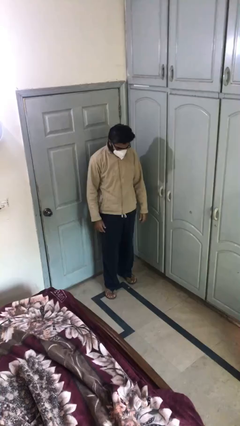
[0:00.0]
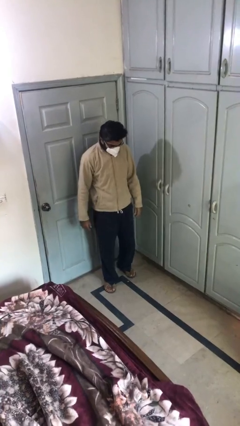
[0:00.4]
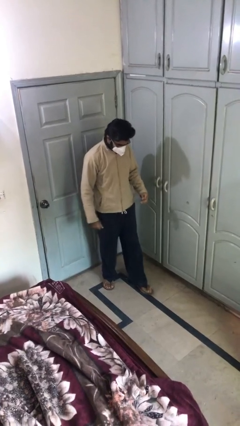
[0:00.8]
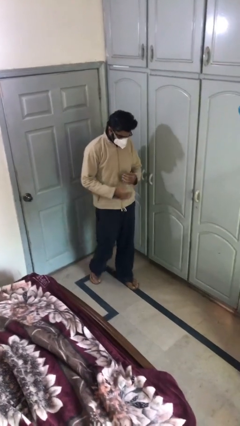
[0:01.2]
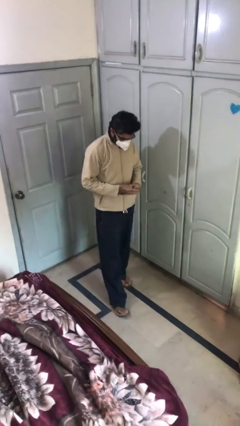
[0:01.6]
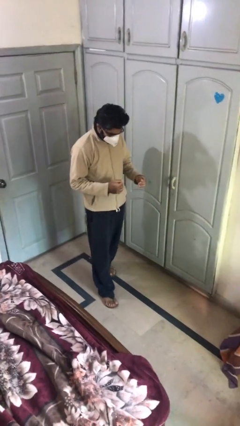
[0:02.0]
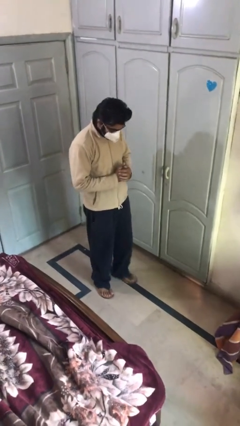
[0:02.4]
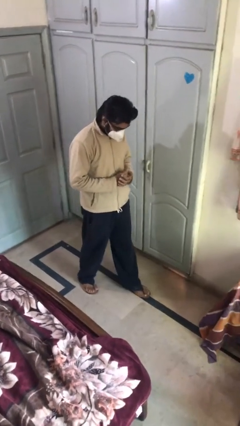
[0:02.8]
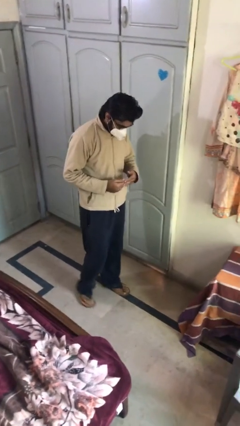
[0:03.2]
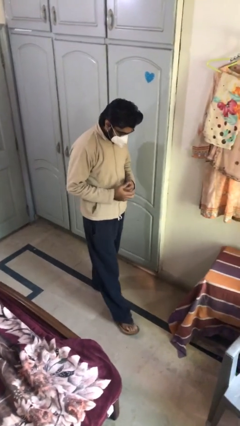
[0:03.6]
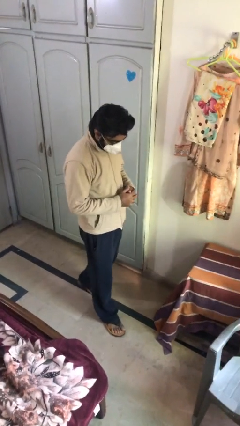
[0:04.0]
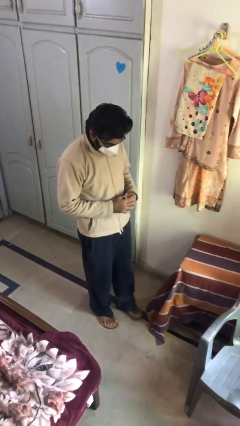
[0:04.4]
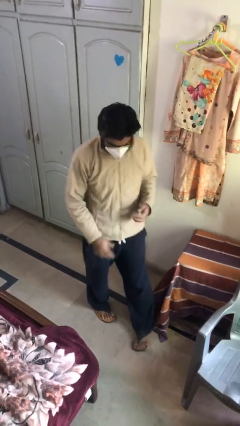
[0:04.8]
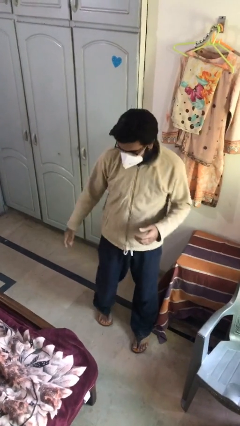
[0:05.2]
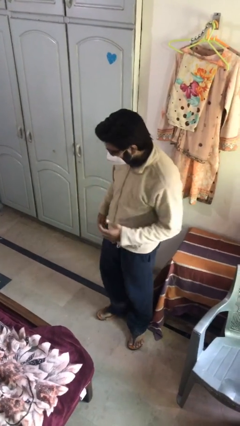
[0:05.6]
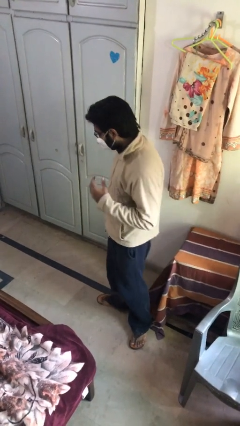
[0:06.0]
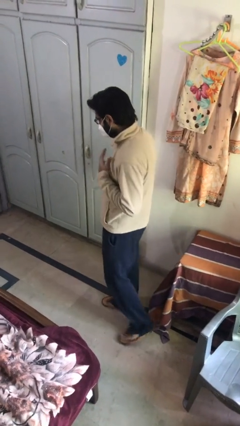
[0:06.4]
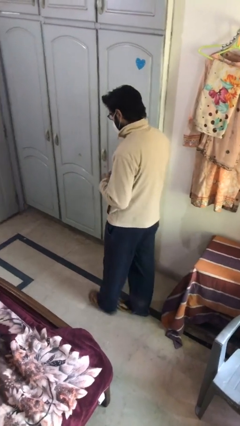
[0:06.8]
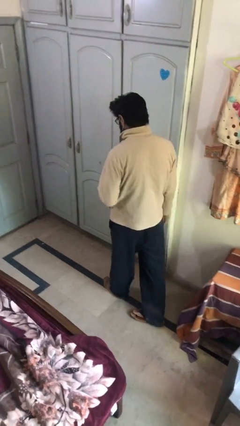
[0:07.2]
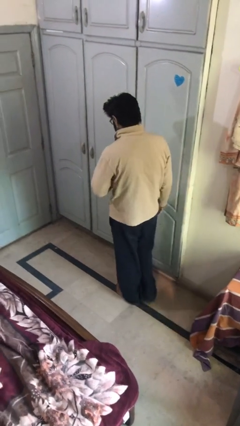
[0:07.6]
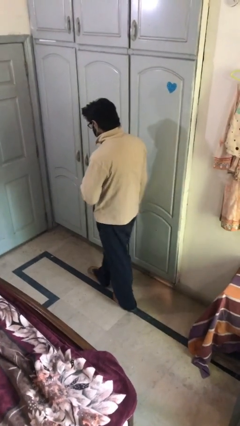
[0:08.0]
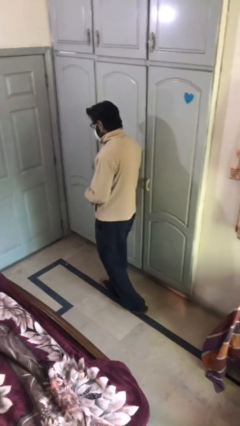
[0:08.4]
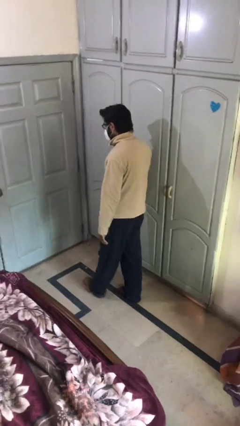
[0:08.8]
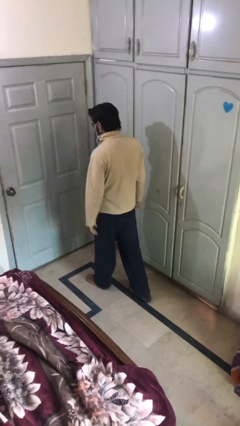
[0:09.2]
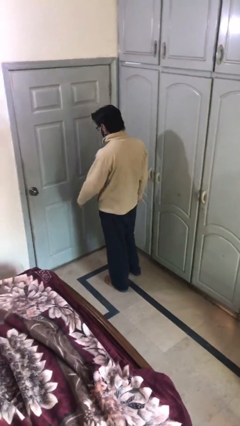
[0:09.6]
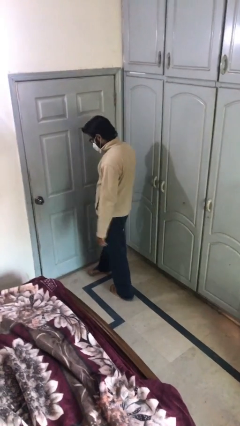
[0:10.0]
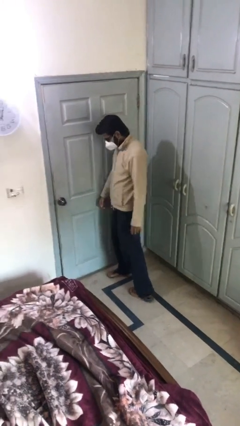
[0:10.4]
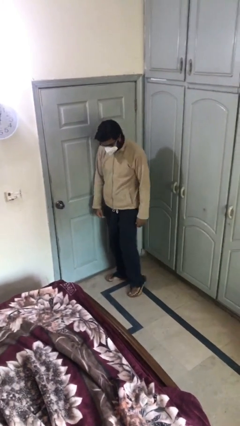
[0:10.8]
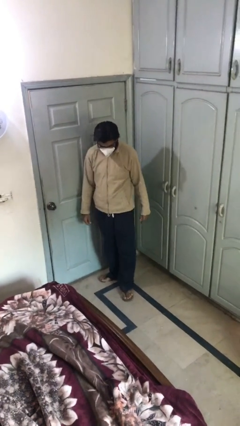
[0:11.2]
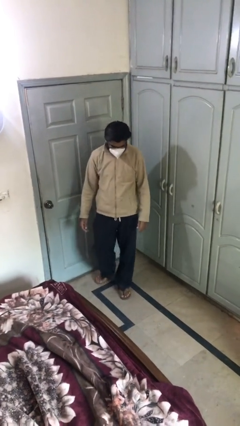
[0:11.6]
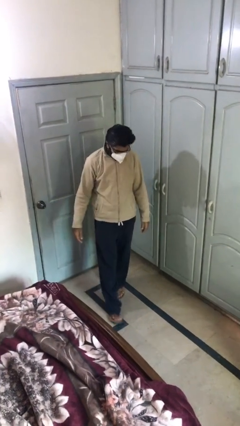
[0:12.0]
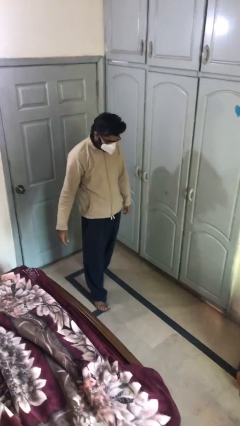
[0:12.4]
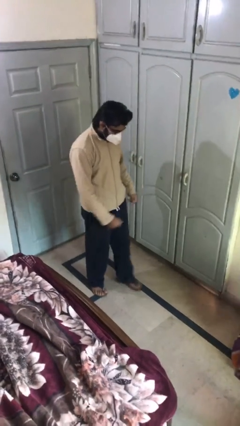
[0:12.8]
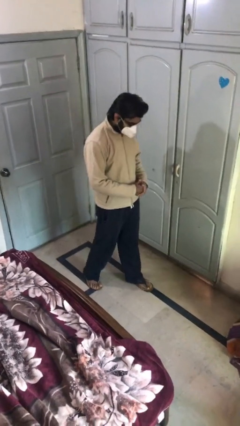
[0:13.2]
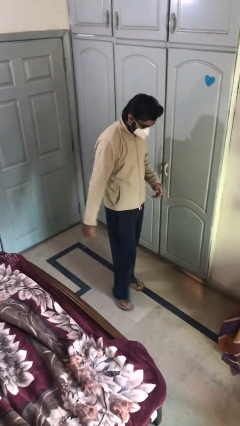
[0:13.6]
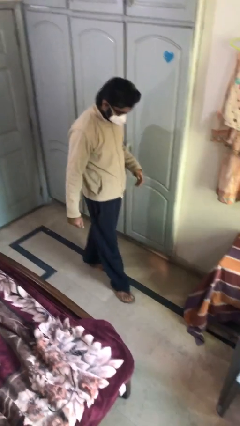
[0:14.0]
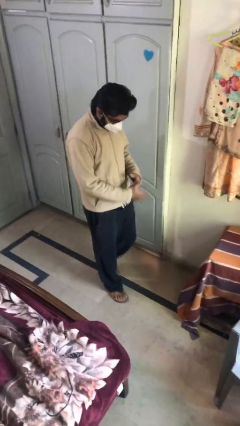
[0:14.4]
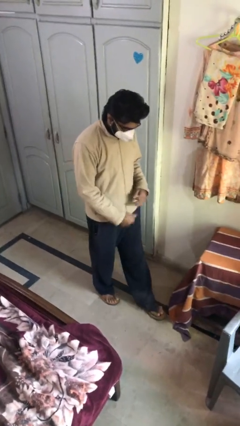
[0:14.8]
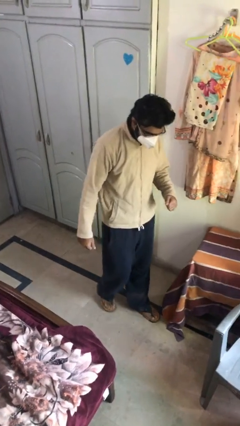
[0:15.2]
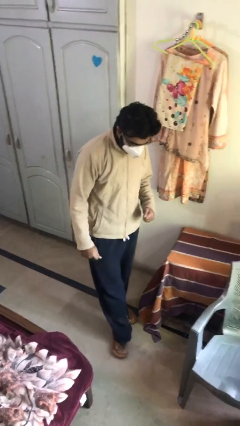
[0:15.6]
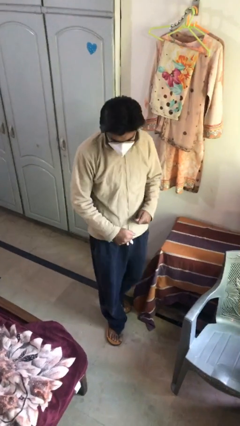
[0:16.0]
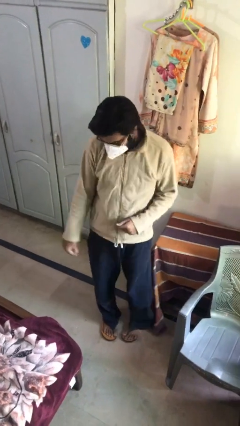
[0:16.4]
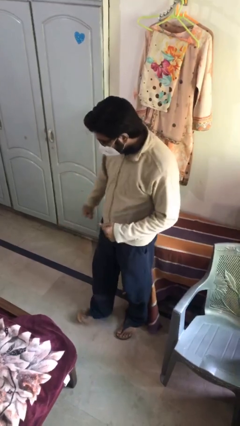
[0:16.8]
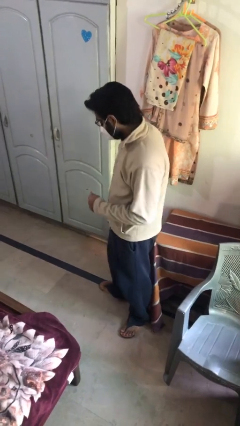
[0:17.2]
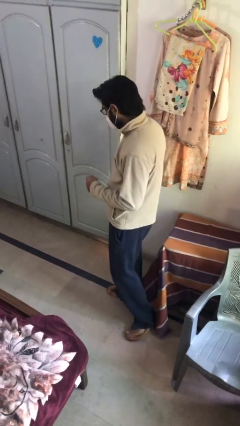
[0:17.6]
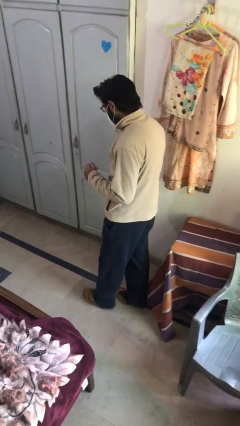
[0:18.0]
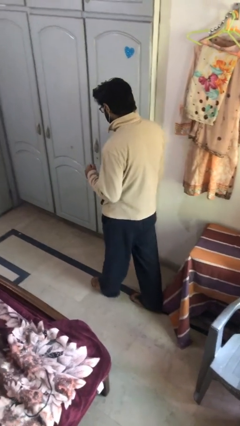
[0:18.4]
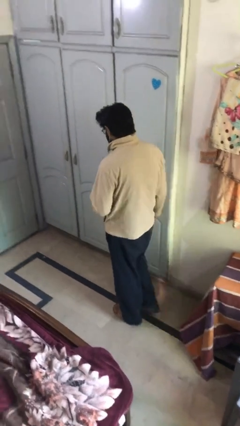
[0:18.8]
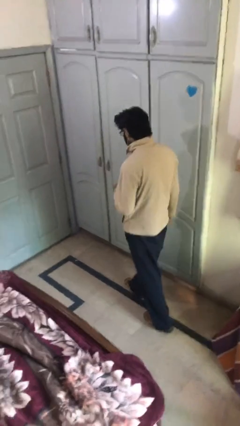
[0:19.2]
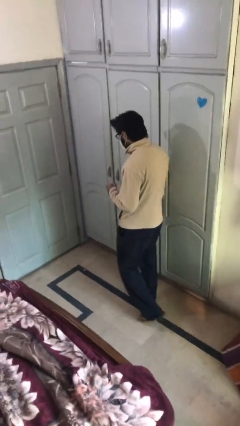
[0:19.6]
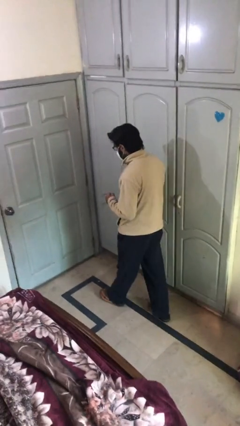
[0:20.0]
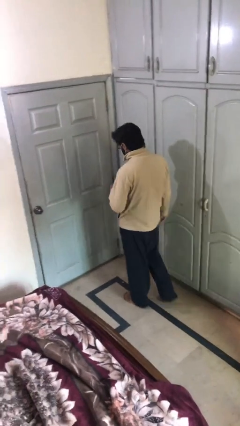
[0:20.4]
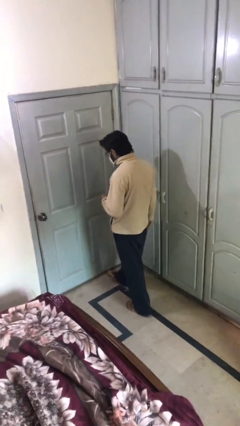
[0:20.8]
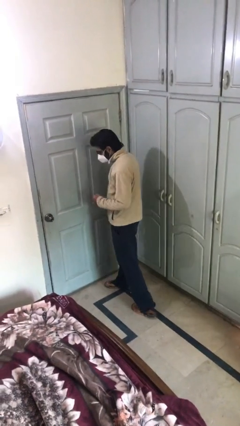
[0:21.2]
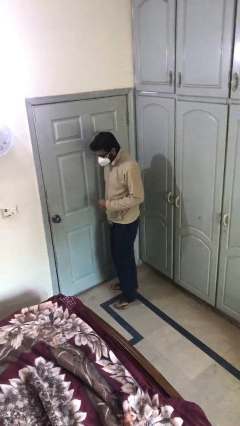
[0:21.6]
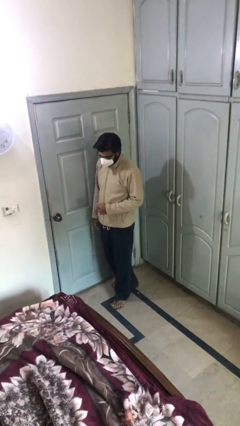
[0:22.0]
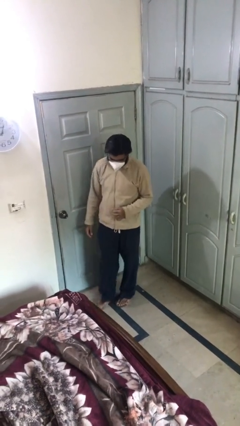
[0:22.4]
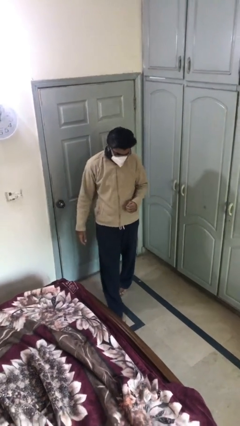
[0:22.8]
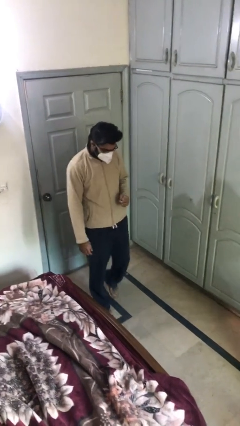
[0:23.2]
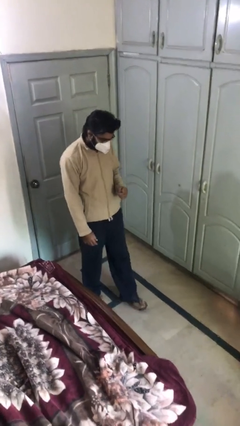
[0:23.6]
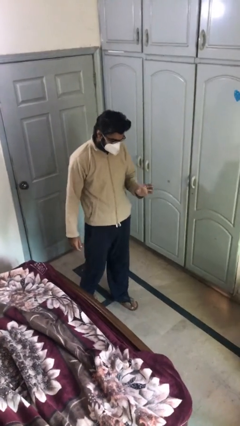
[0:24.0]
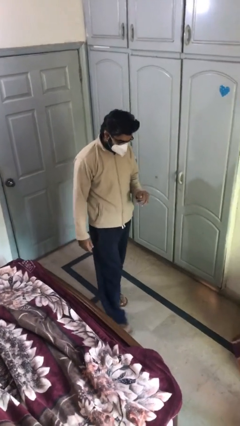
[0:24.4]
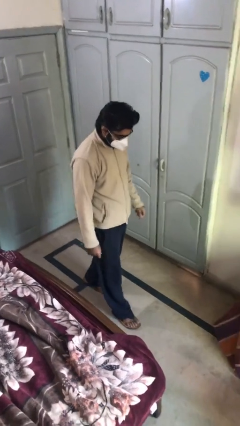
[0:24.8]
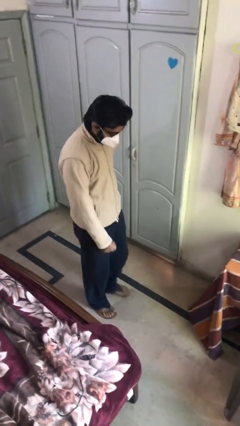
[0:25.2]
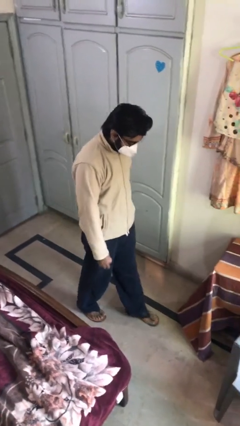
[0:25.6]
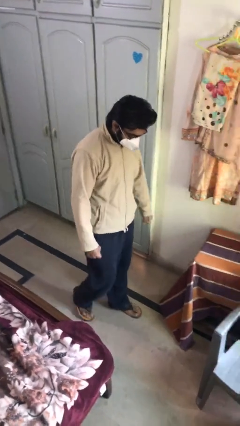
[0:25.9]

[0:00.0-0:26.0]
person walks

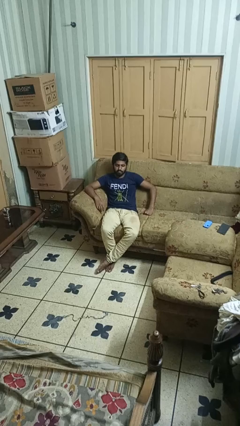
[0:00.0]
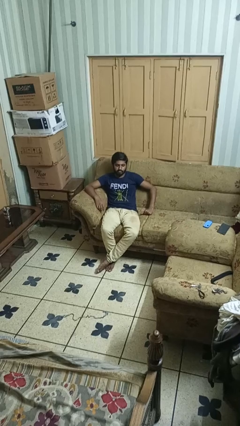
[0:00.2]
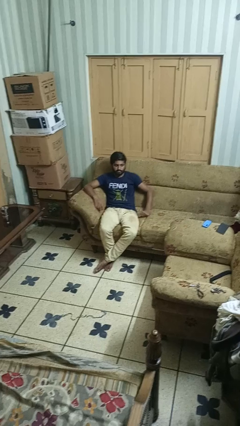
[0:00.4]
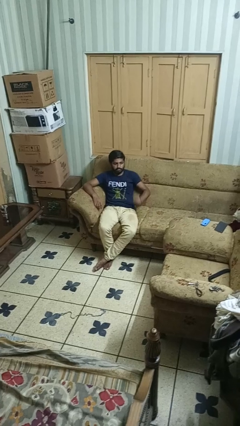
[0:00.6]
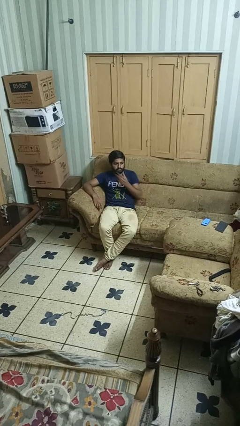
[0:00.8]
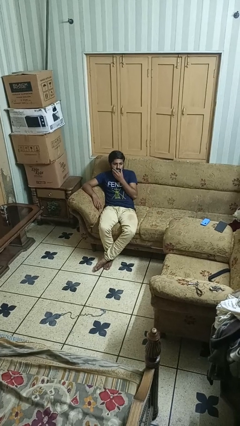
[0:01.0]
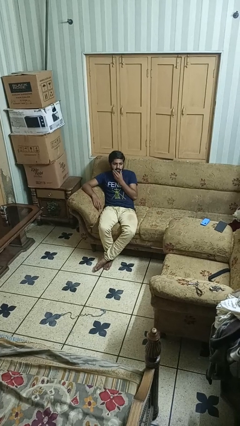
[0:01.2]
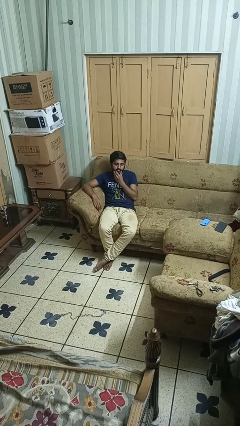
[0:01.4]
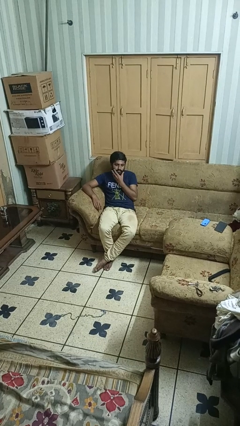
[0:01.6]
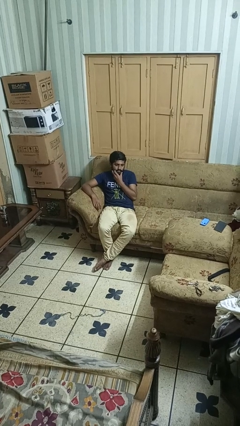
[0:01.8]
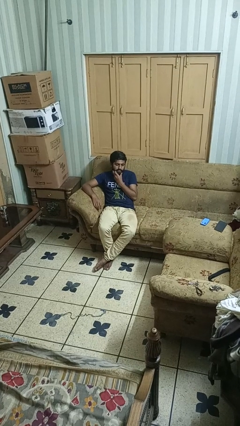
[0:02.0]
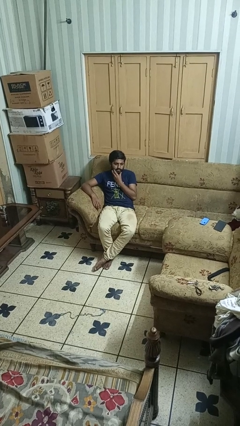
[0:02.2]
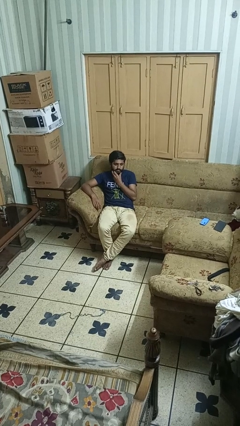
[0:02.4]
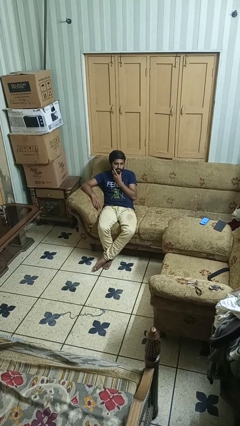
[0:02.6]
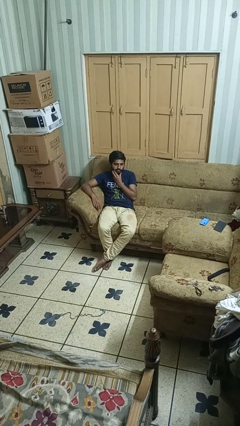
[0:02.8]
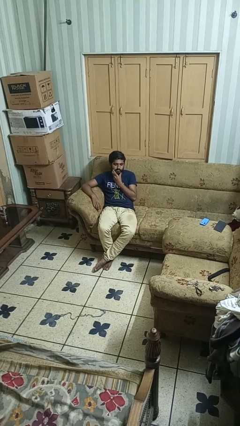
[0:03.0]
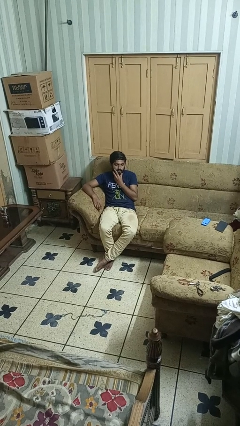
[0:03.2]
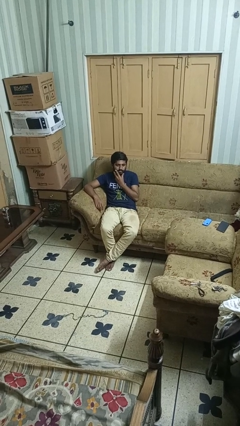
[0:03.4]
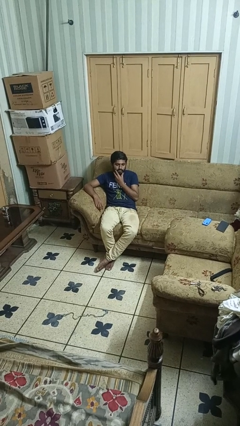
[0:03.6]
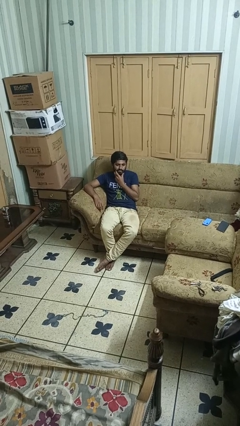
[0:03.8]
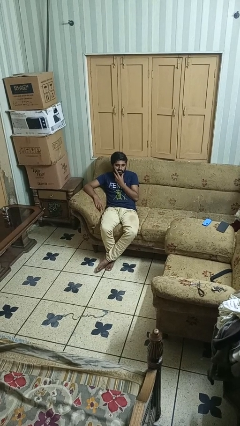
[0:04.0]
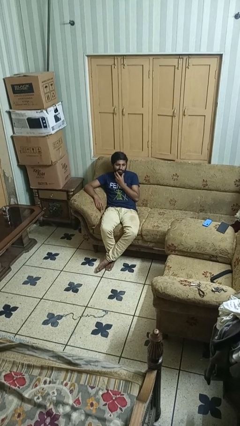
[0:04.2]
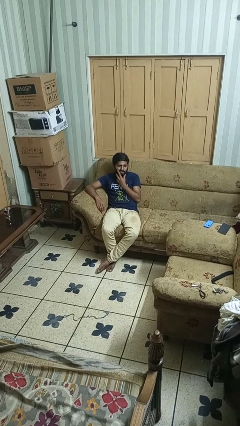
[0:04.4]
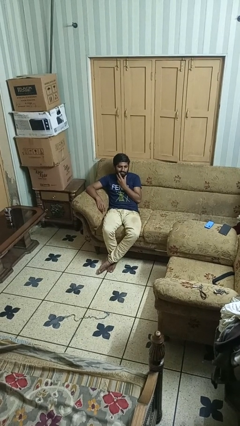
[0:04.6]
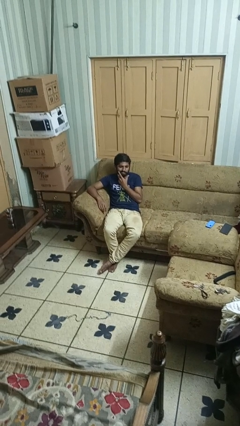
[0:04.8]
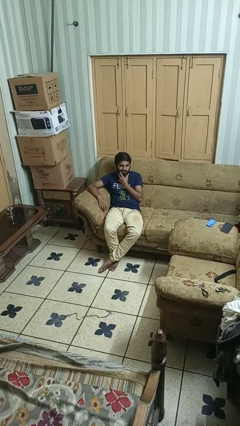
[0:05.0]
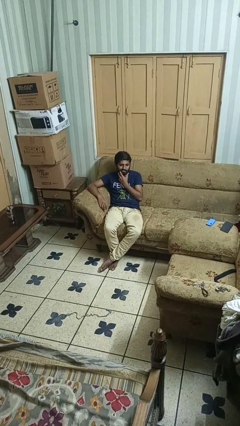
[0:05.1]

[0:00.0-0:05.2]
person strokes chin
